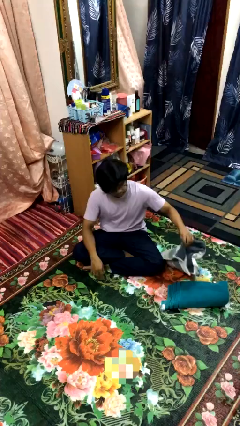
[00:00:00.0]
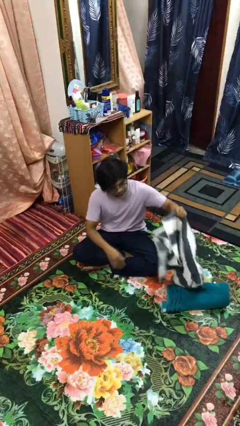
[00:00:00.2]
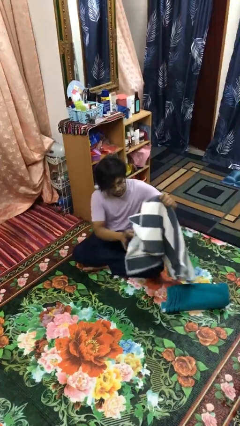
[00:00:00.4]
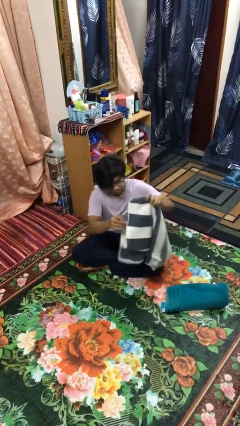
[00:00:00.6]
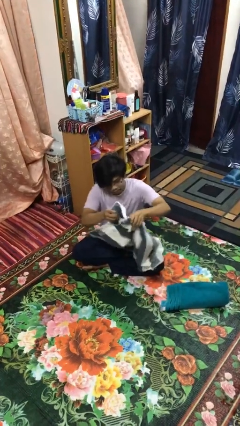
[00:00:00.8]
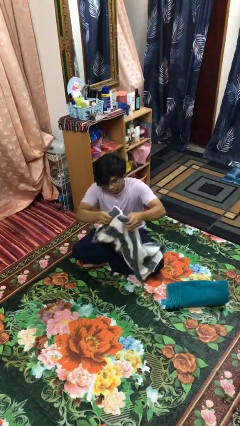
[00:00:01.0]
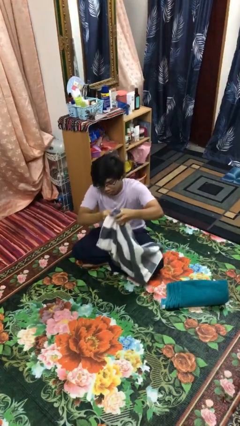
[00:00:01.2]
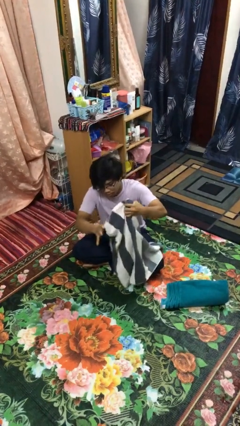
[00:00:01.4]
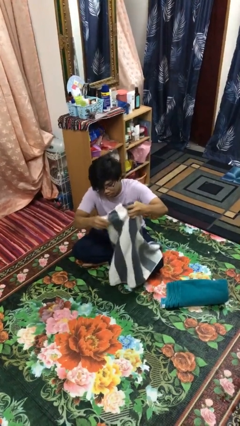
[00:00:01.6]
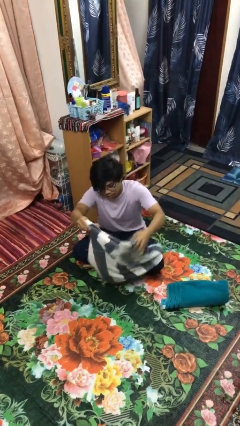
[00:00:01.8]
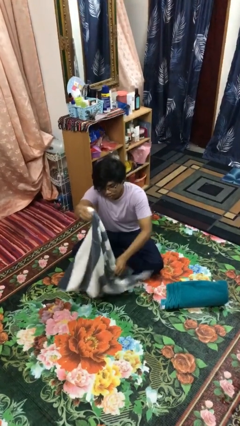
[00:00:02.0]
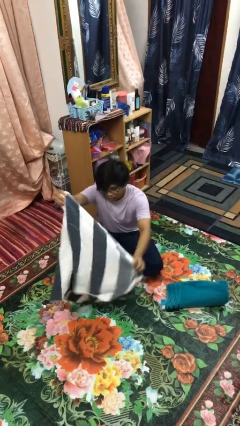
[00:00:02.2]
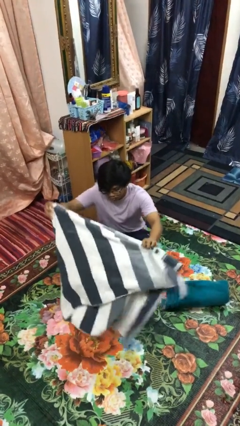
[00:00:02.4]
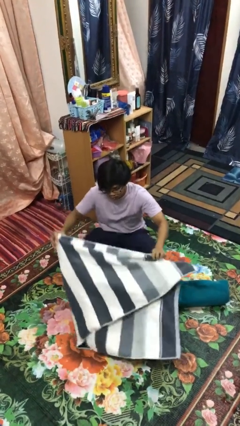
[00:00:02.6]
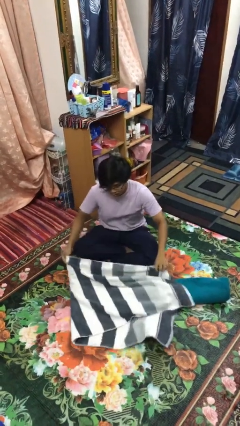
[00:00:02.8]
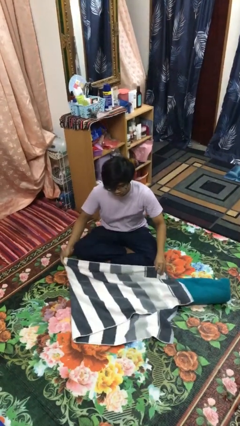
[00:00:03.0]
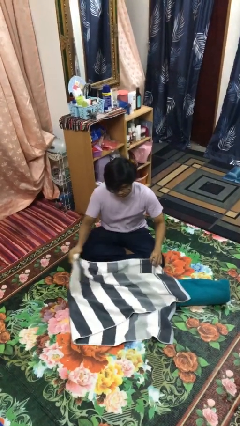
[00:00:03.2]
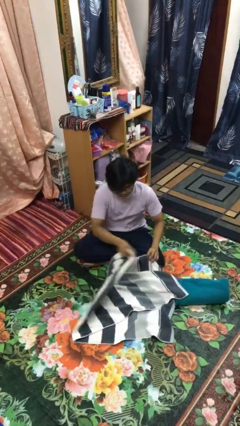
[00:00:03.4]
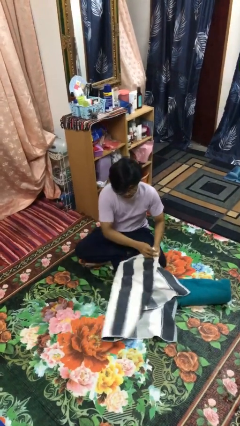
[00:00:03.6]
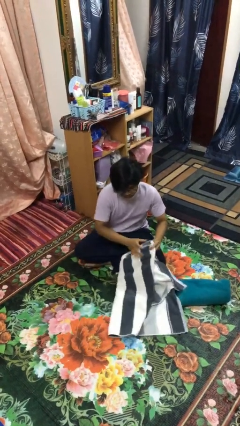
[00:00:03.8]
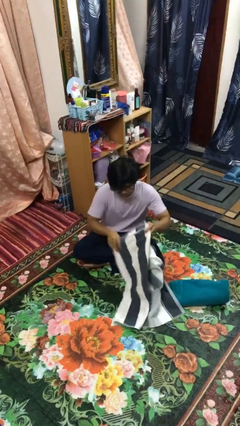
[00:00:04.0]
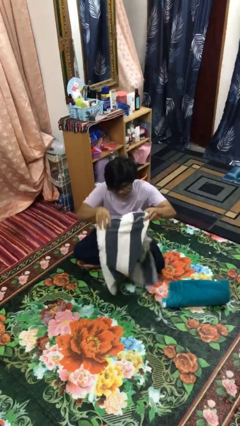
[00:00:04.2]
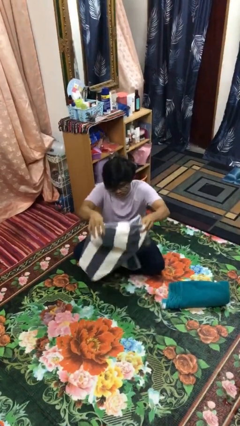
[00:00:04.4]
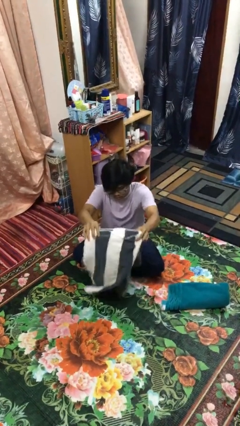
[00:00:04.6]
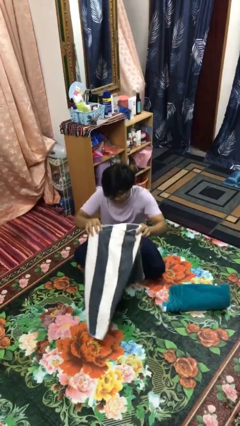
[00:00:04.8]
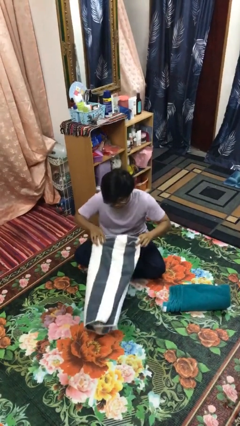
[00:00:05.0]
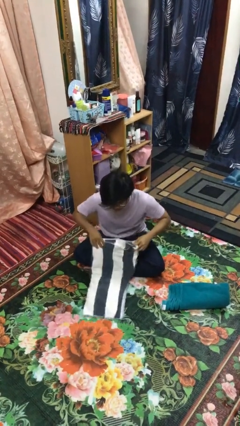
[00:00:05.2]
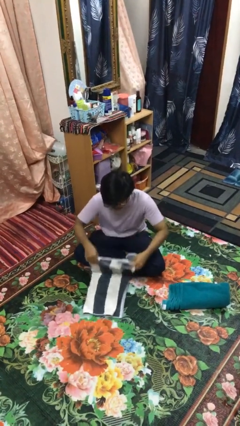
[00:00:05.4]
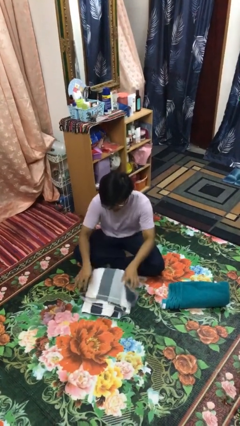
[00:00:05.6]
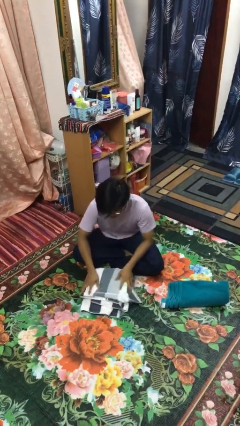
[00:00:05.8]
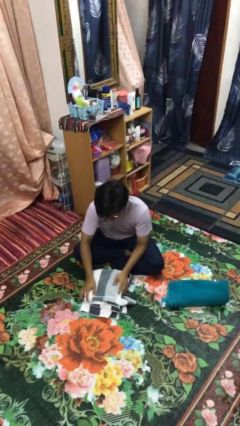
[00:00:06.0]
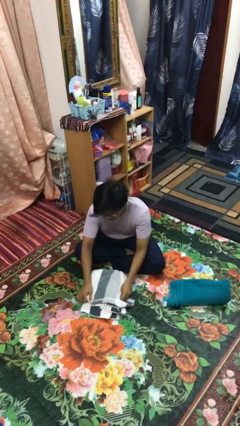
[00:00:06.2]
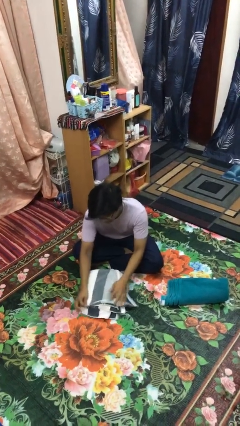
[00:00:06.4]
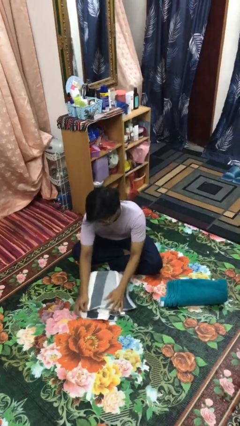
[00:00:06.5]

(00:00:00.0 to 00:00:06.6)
person folds towel

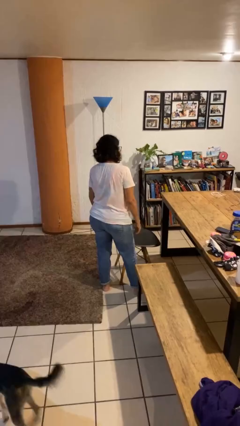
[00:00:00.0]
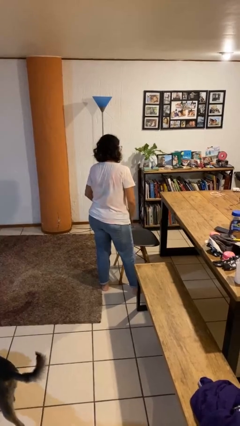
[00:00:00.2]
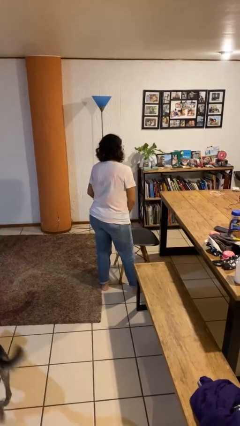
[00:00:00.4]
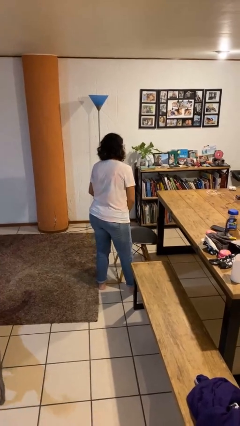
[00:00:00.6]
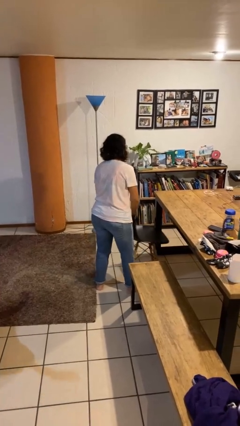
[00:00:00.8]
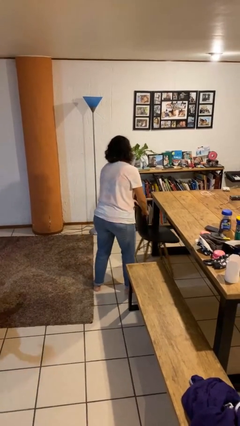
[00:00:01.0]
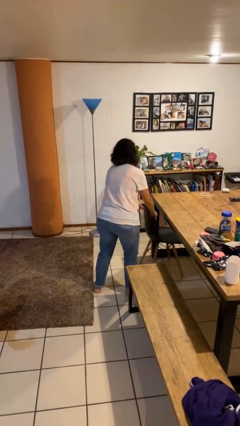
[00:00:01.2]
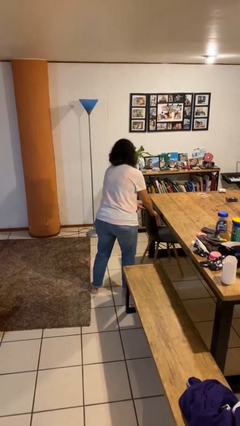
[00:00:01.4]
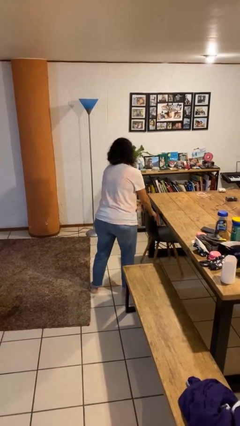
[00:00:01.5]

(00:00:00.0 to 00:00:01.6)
person pushes in chair

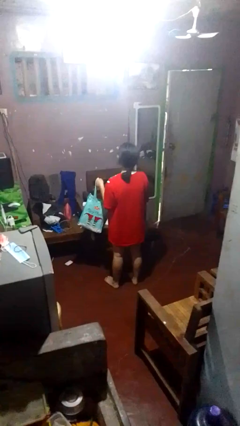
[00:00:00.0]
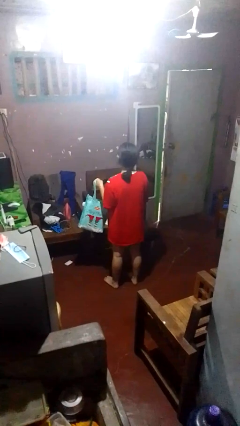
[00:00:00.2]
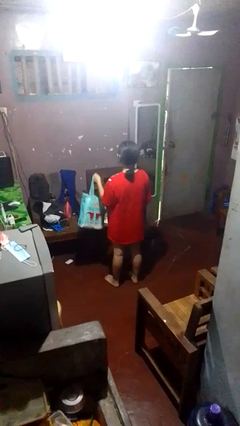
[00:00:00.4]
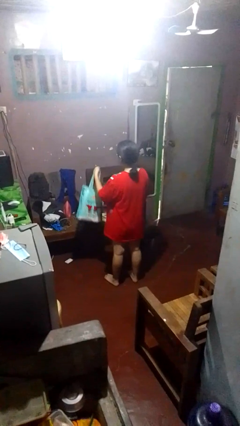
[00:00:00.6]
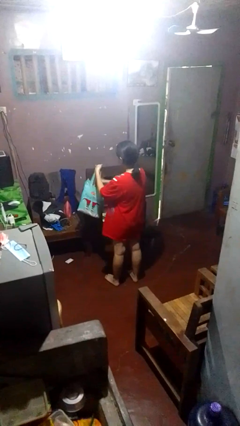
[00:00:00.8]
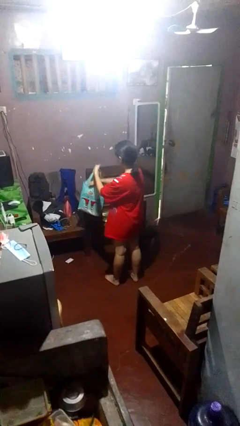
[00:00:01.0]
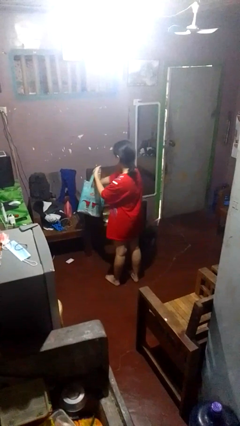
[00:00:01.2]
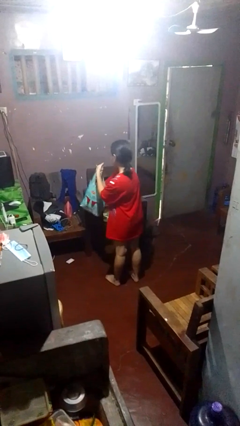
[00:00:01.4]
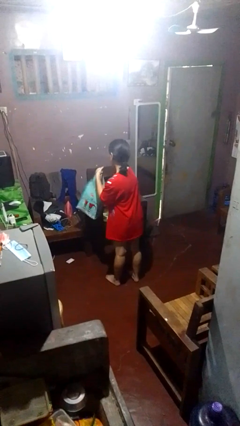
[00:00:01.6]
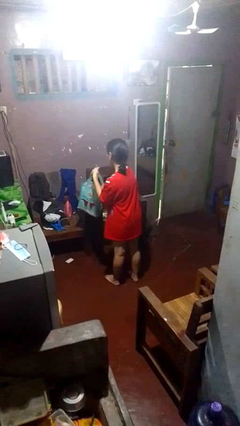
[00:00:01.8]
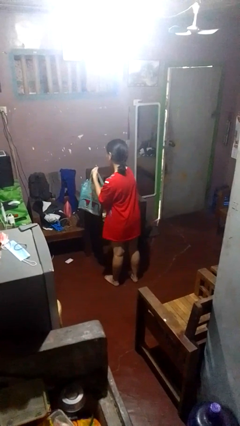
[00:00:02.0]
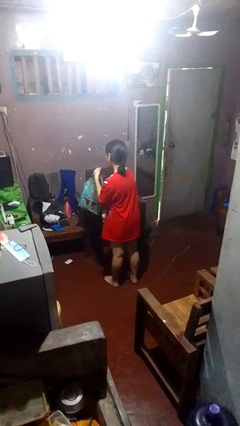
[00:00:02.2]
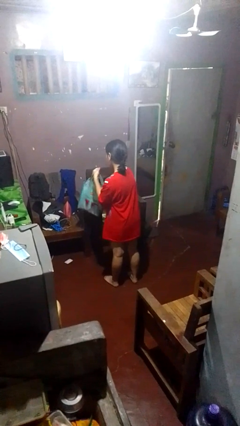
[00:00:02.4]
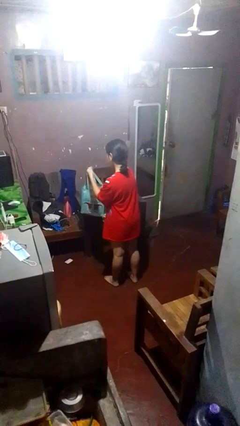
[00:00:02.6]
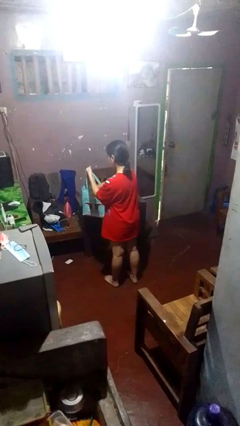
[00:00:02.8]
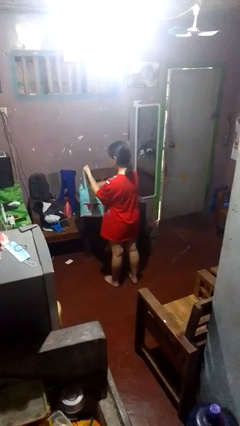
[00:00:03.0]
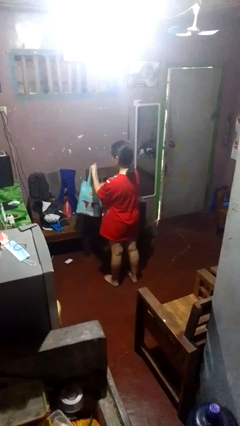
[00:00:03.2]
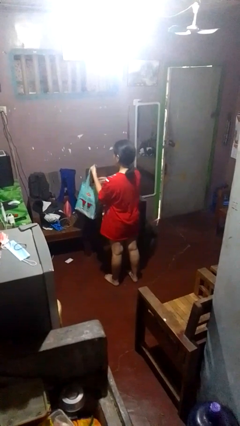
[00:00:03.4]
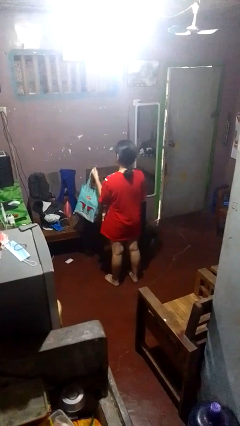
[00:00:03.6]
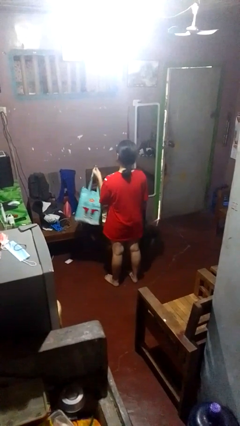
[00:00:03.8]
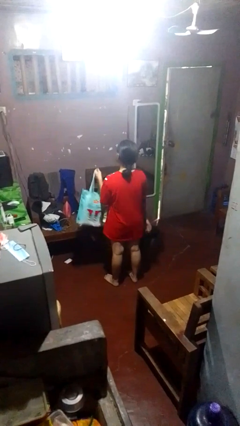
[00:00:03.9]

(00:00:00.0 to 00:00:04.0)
person searches in bag

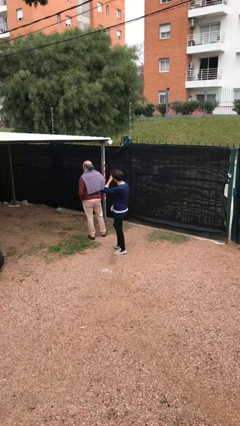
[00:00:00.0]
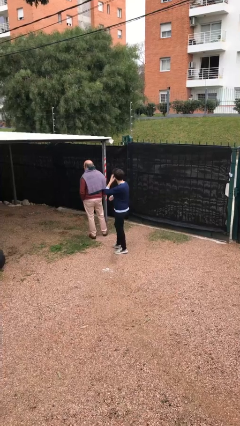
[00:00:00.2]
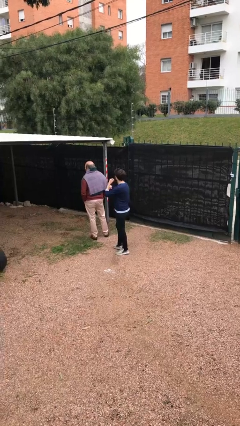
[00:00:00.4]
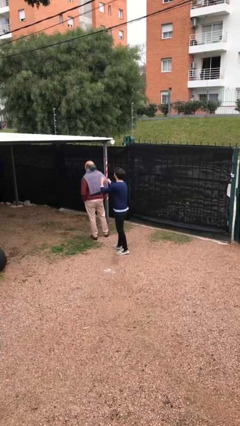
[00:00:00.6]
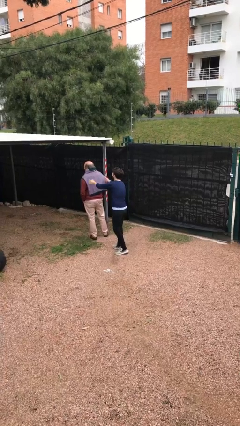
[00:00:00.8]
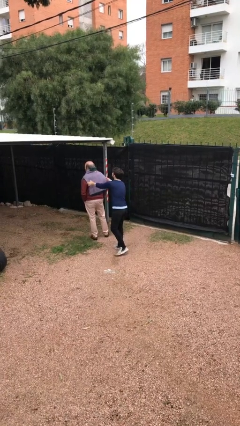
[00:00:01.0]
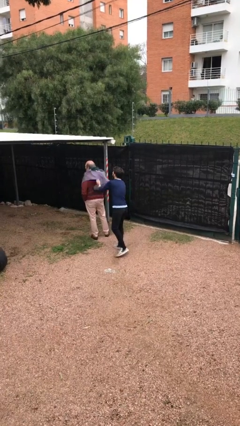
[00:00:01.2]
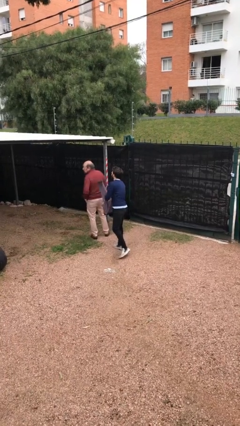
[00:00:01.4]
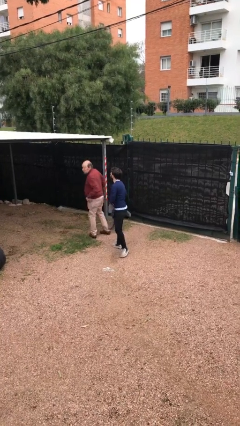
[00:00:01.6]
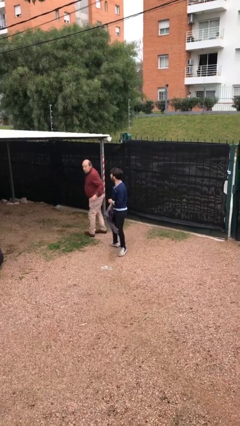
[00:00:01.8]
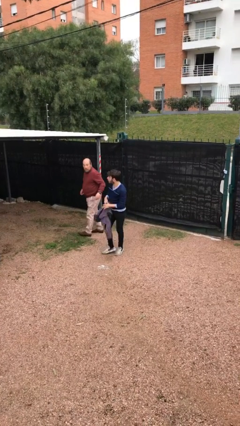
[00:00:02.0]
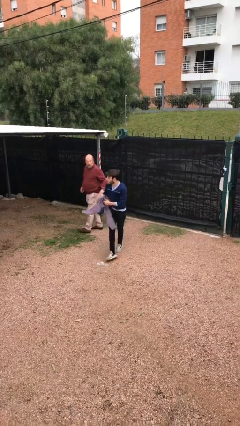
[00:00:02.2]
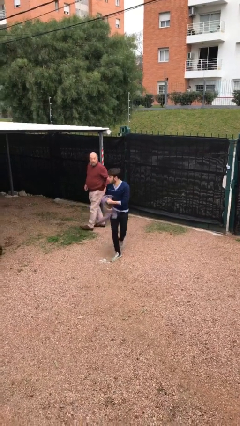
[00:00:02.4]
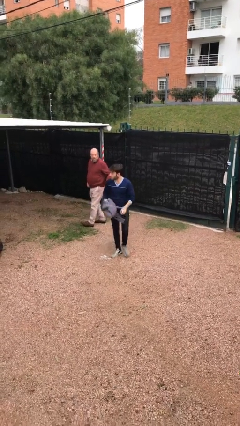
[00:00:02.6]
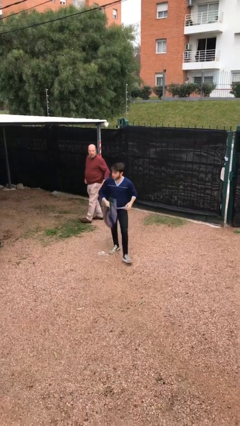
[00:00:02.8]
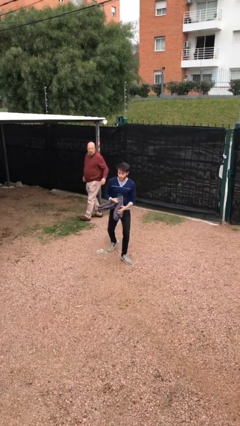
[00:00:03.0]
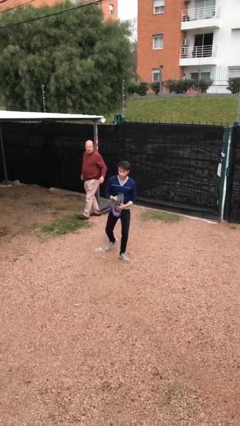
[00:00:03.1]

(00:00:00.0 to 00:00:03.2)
person steals object from person

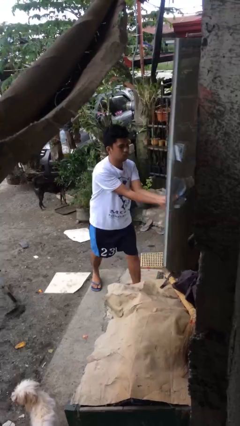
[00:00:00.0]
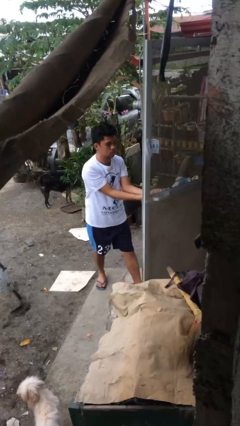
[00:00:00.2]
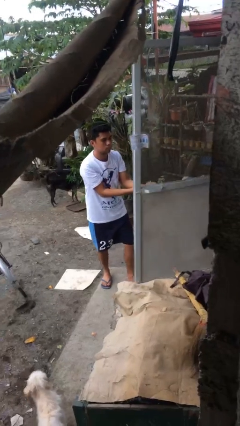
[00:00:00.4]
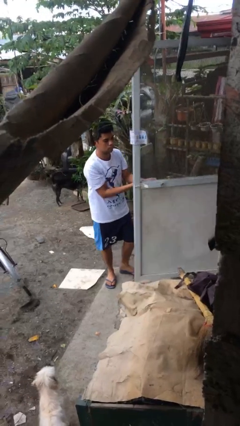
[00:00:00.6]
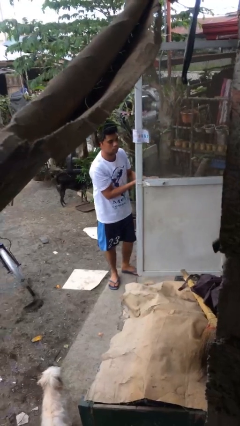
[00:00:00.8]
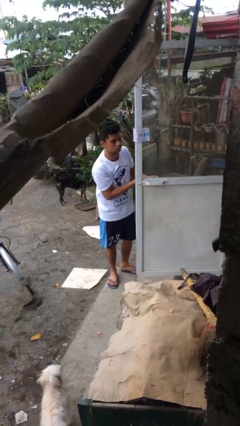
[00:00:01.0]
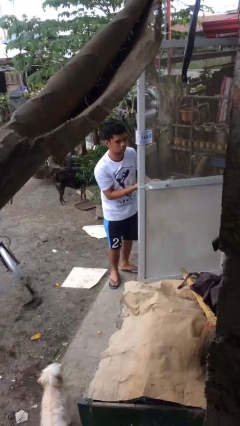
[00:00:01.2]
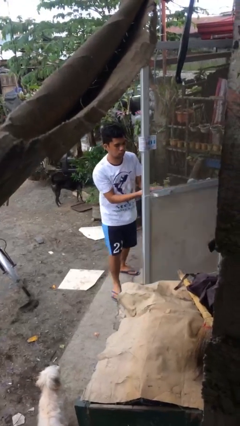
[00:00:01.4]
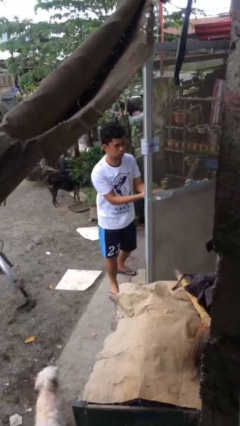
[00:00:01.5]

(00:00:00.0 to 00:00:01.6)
person opens facility door
